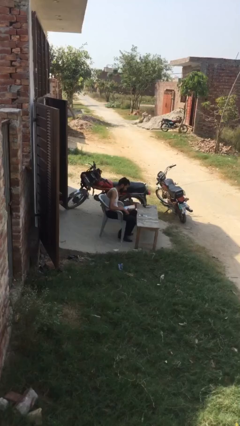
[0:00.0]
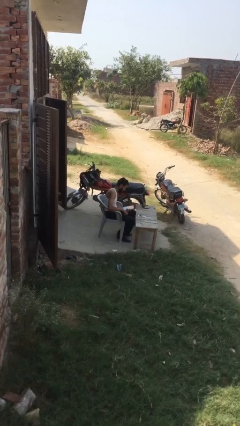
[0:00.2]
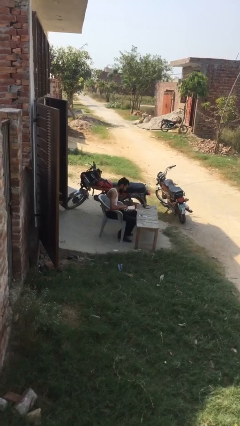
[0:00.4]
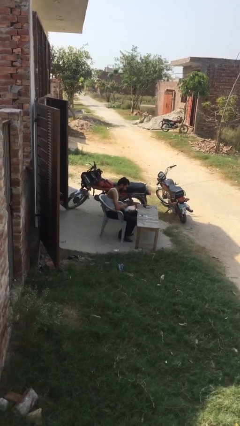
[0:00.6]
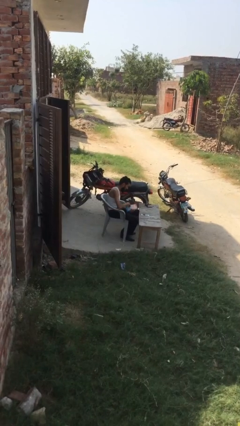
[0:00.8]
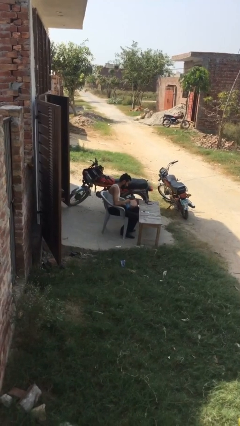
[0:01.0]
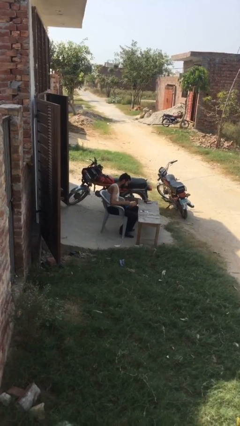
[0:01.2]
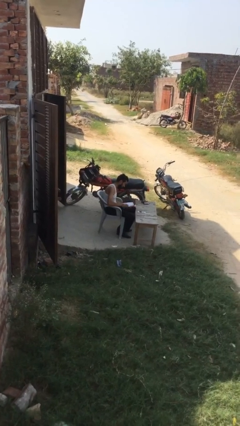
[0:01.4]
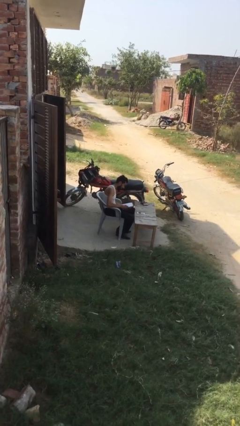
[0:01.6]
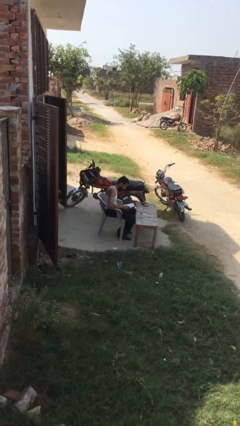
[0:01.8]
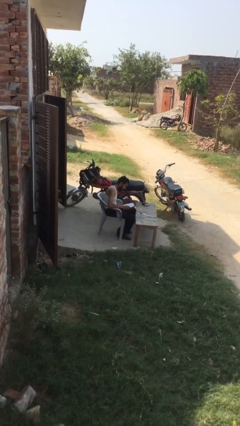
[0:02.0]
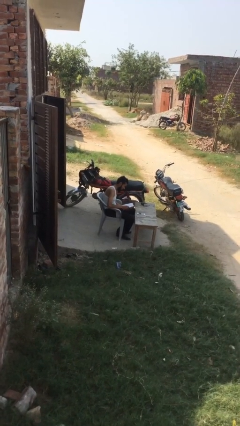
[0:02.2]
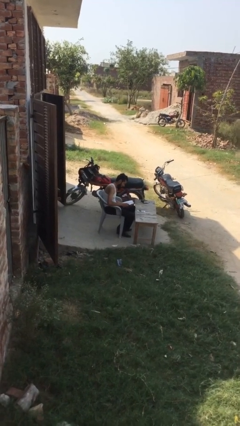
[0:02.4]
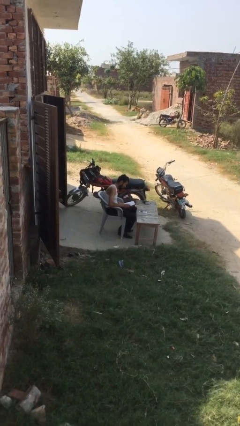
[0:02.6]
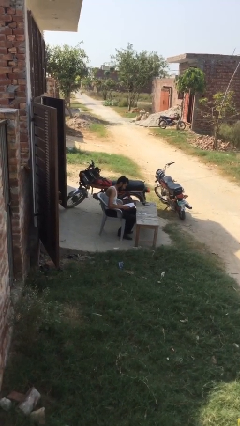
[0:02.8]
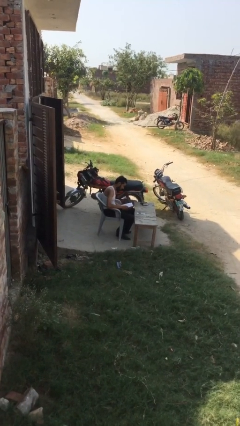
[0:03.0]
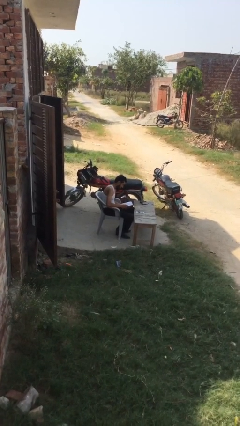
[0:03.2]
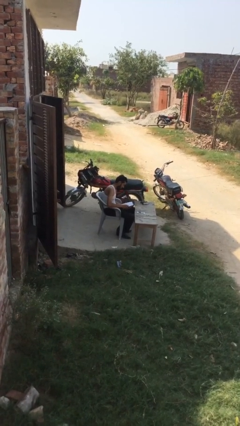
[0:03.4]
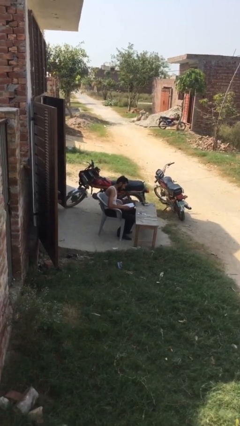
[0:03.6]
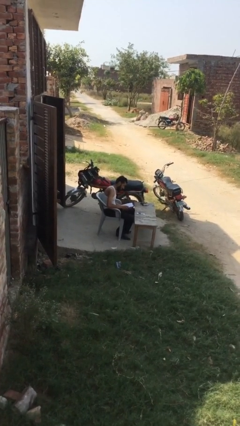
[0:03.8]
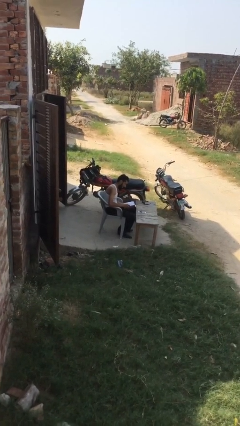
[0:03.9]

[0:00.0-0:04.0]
person reads document

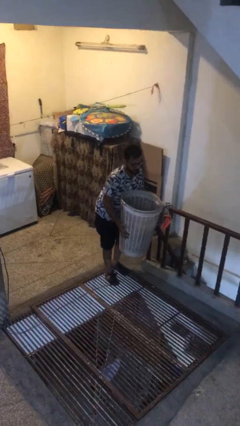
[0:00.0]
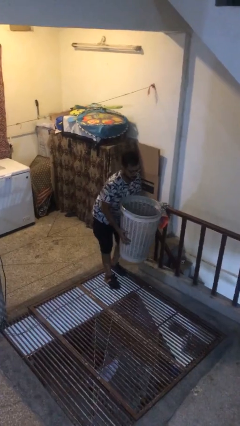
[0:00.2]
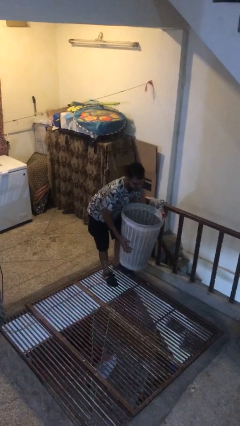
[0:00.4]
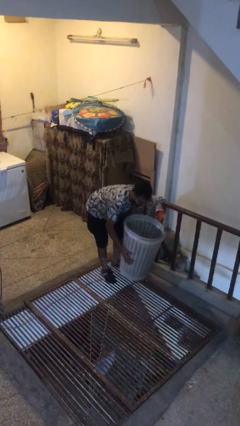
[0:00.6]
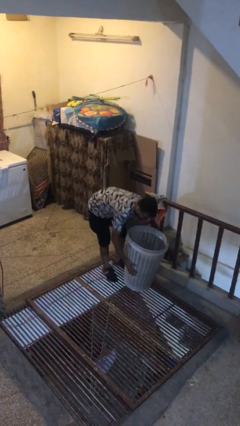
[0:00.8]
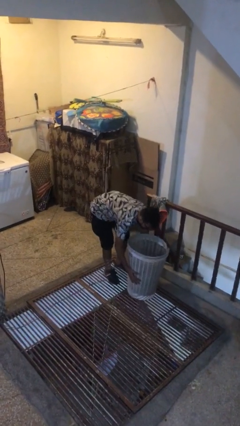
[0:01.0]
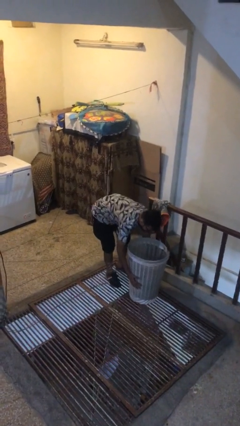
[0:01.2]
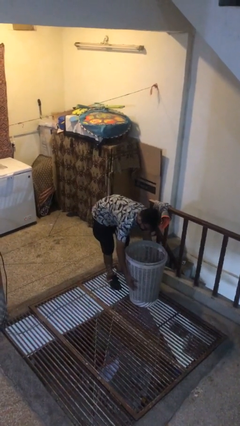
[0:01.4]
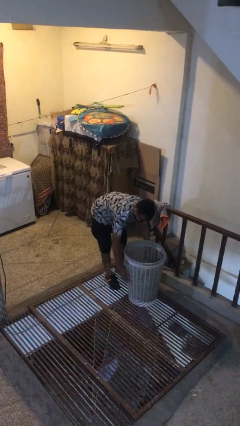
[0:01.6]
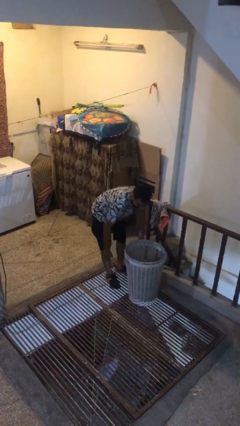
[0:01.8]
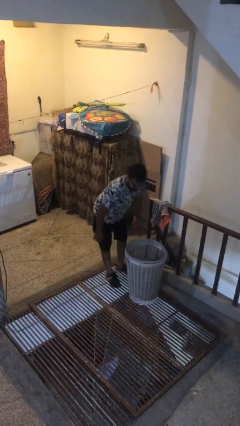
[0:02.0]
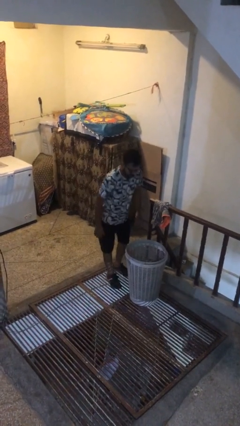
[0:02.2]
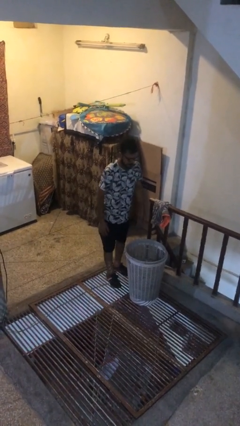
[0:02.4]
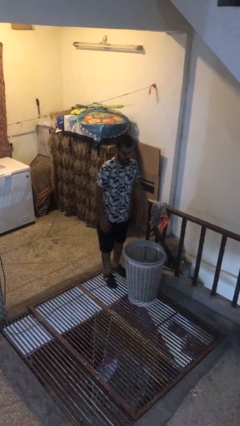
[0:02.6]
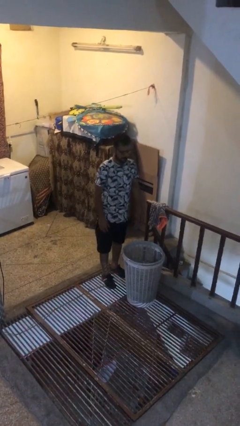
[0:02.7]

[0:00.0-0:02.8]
person puts down object on floor

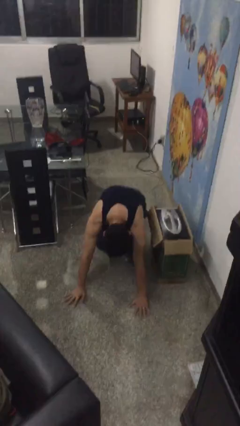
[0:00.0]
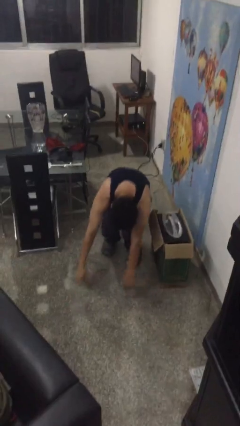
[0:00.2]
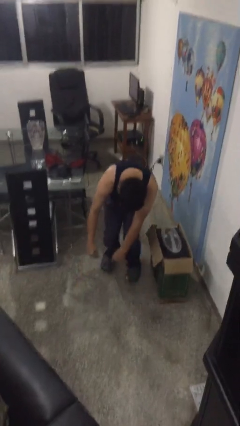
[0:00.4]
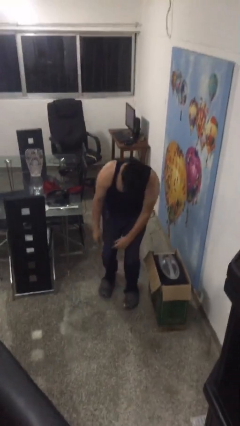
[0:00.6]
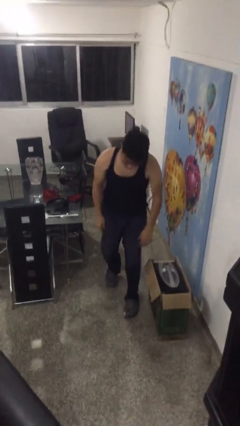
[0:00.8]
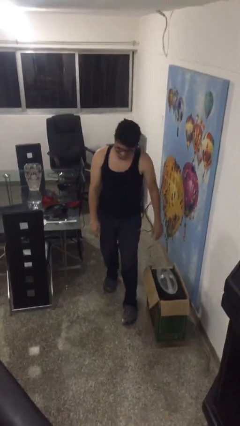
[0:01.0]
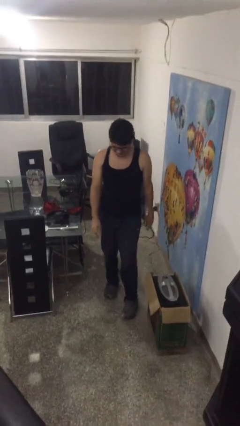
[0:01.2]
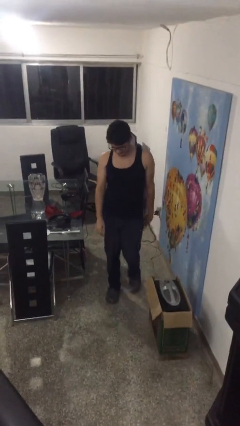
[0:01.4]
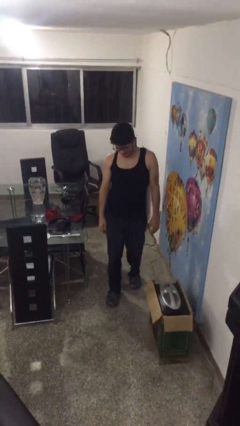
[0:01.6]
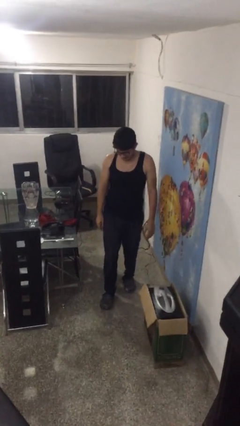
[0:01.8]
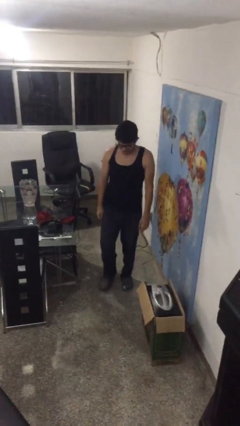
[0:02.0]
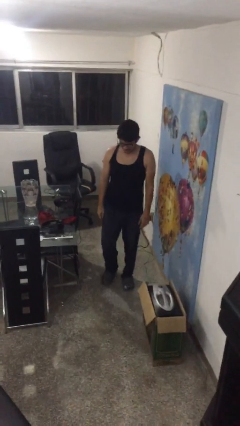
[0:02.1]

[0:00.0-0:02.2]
person stands up from floor

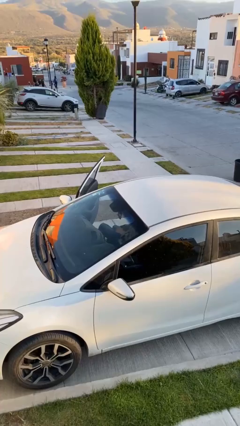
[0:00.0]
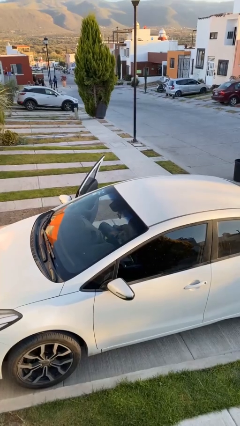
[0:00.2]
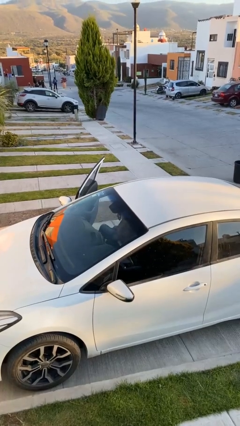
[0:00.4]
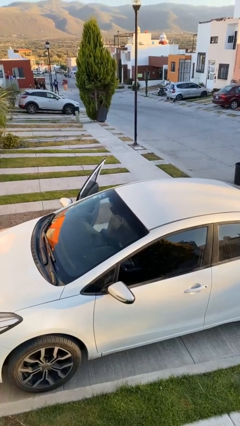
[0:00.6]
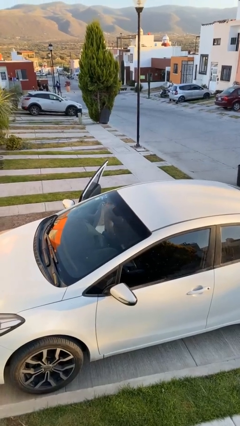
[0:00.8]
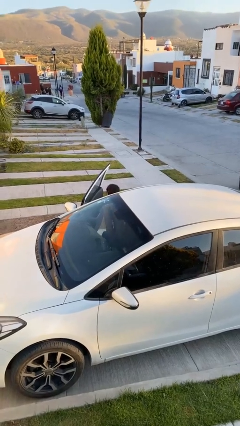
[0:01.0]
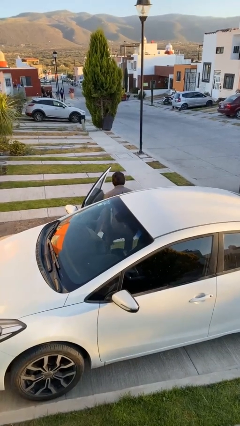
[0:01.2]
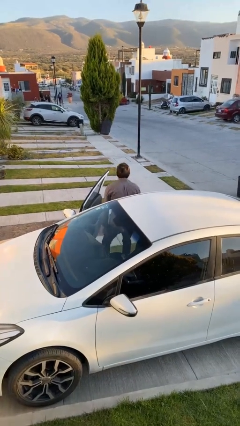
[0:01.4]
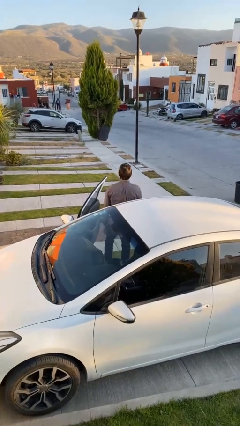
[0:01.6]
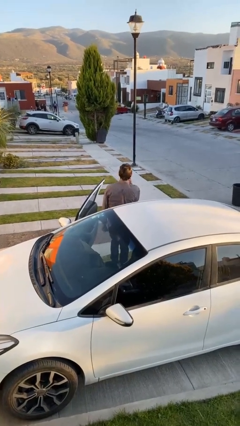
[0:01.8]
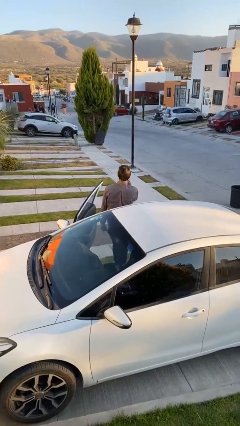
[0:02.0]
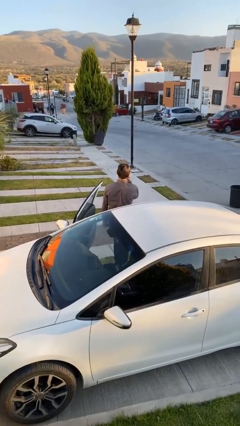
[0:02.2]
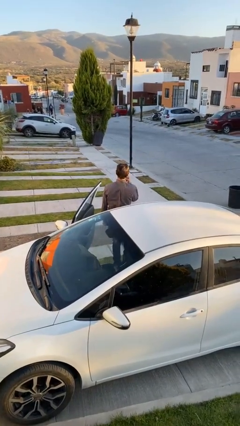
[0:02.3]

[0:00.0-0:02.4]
person exits car

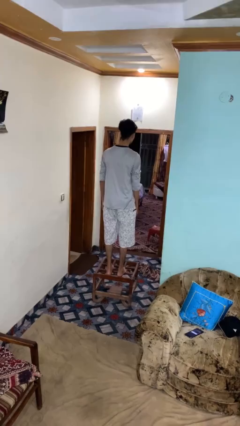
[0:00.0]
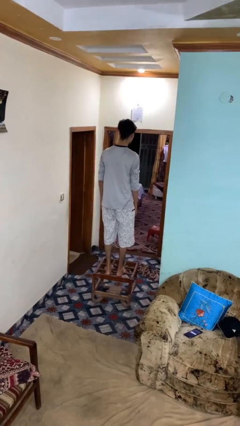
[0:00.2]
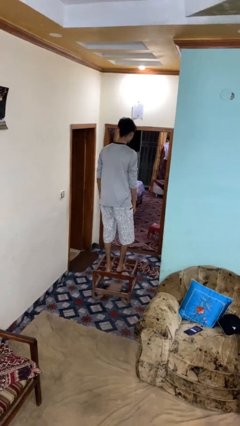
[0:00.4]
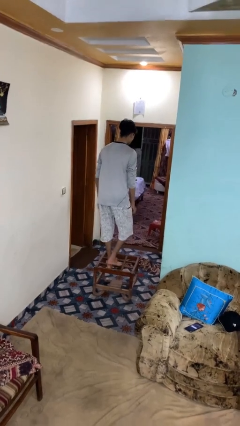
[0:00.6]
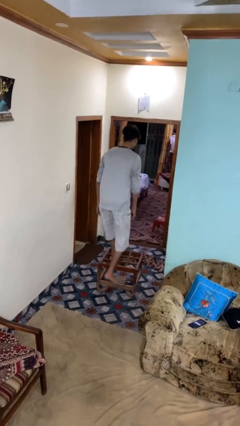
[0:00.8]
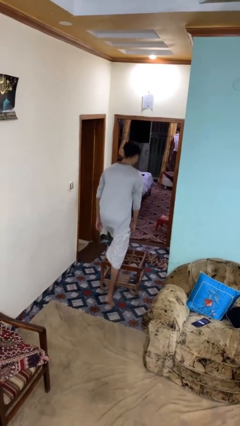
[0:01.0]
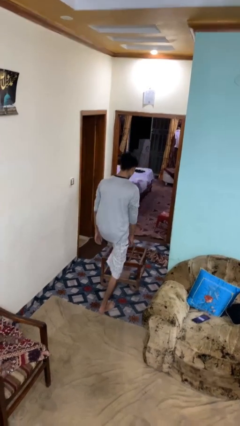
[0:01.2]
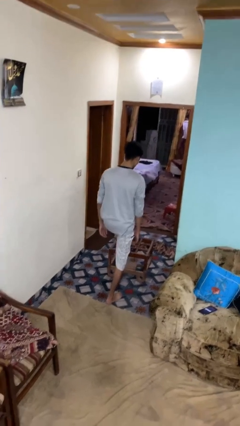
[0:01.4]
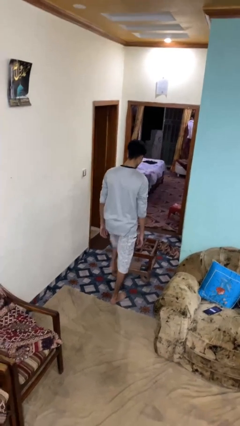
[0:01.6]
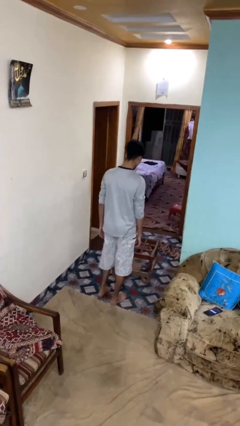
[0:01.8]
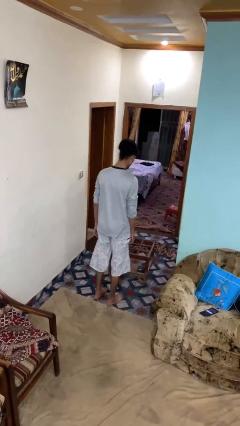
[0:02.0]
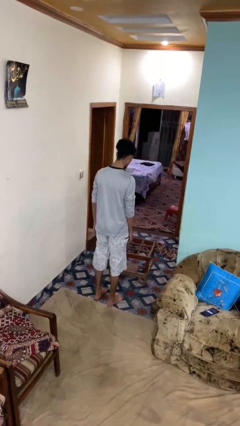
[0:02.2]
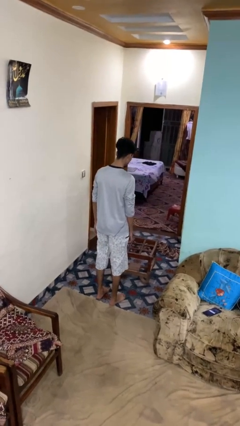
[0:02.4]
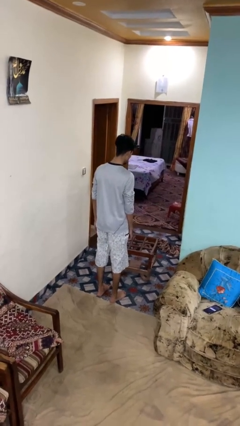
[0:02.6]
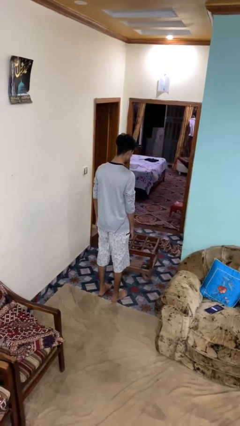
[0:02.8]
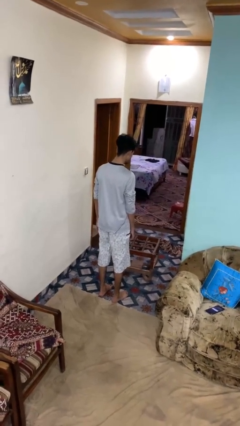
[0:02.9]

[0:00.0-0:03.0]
person climbs off table

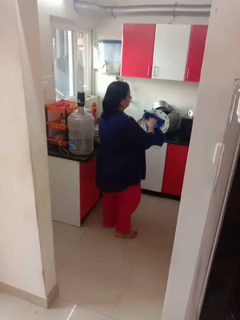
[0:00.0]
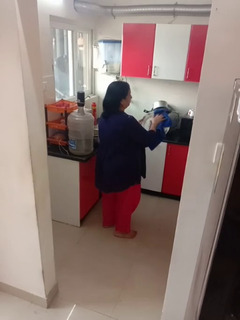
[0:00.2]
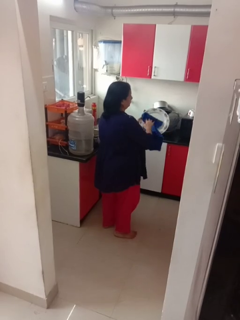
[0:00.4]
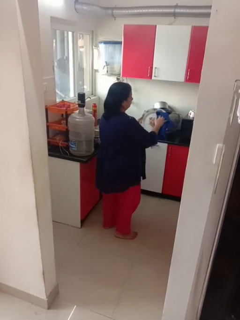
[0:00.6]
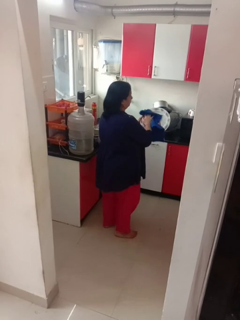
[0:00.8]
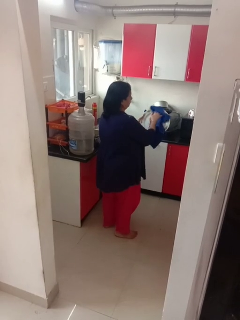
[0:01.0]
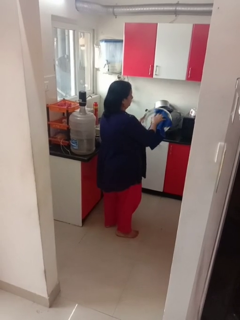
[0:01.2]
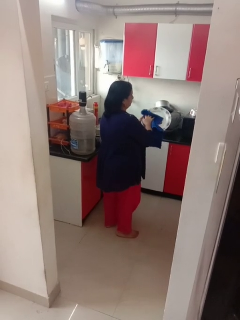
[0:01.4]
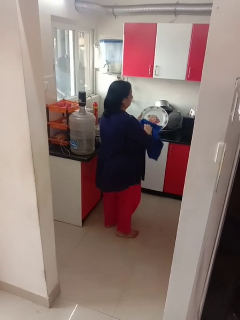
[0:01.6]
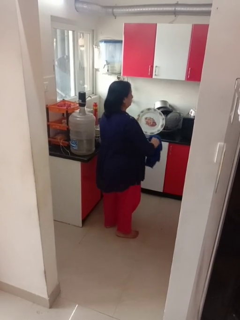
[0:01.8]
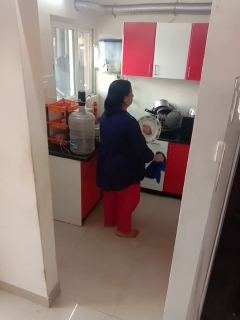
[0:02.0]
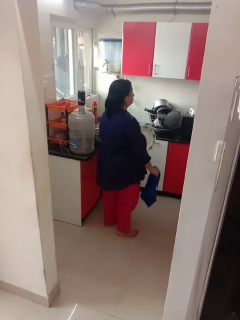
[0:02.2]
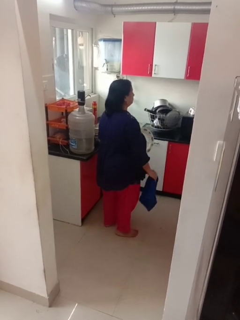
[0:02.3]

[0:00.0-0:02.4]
person dries dish

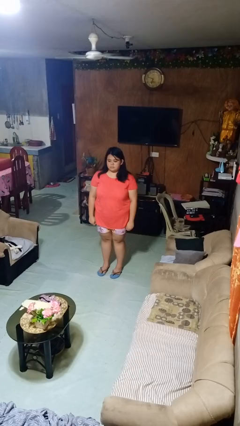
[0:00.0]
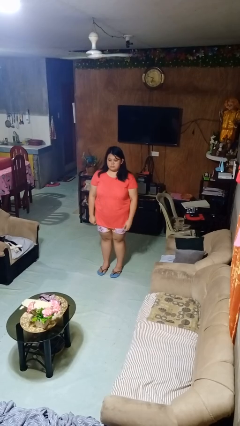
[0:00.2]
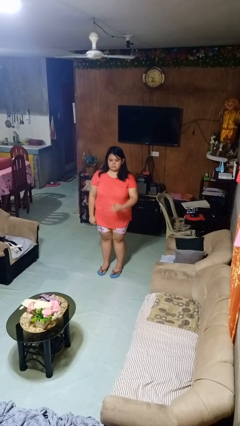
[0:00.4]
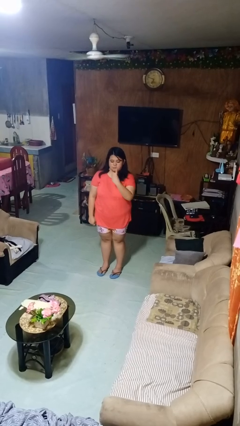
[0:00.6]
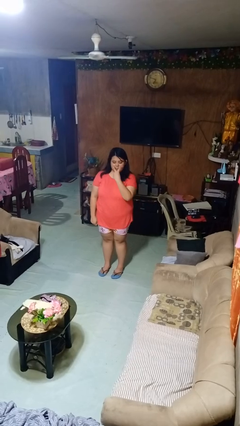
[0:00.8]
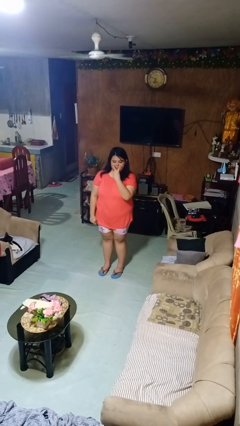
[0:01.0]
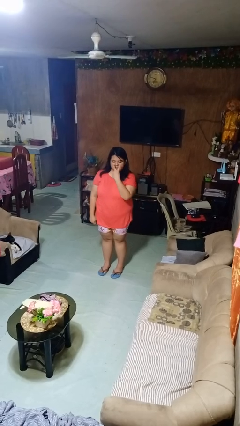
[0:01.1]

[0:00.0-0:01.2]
person gestures watch closely
